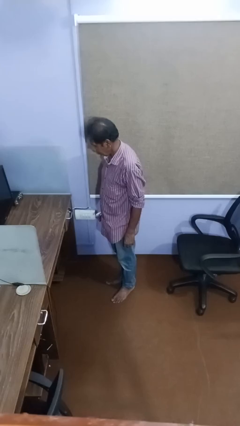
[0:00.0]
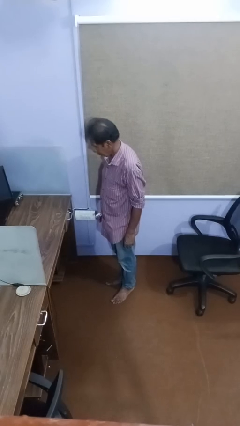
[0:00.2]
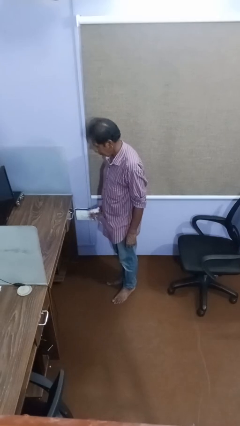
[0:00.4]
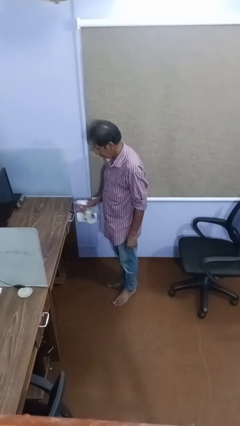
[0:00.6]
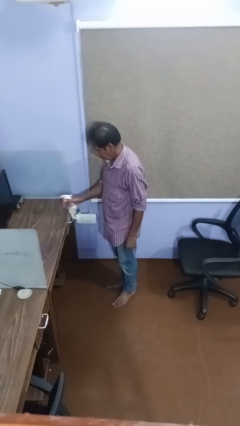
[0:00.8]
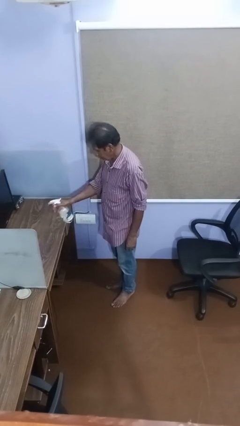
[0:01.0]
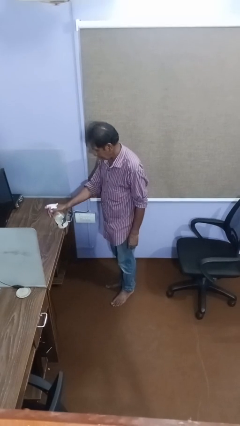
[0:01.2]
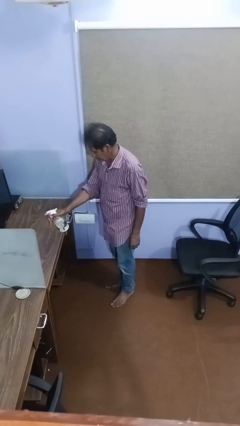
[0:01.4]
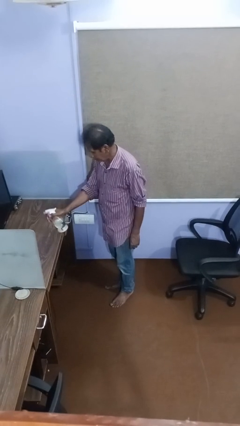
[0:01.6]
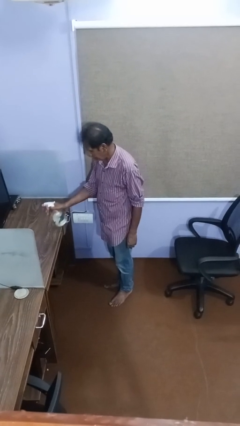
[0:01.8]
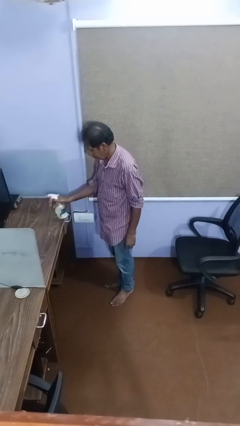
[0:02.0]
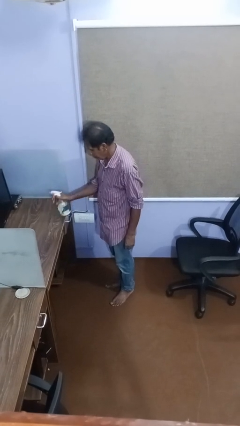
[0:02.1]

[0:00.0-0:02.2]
person sprays from bottle

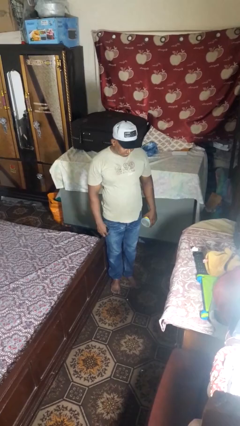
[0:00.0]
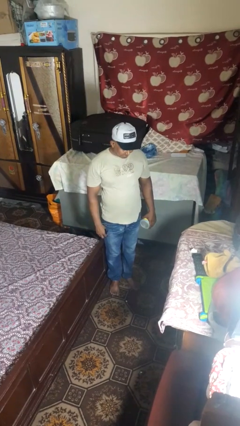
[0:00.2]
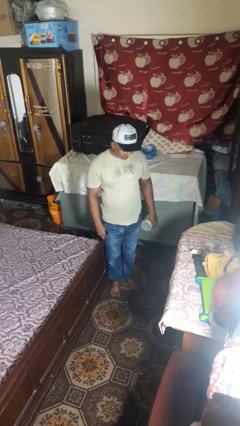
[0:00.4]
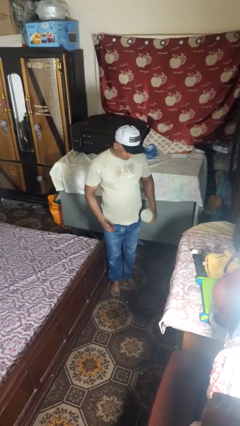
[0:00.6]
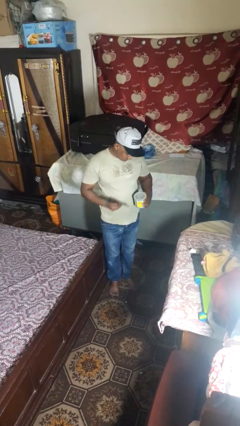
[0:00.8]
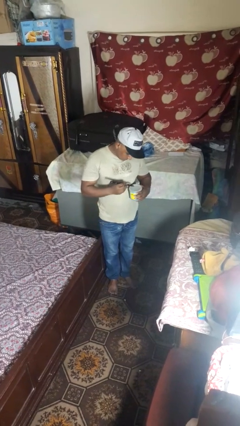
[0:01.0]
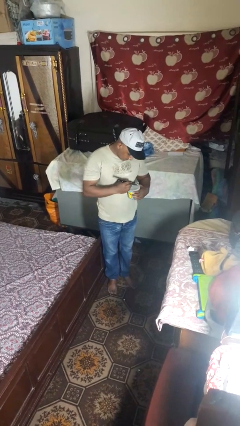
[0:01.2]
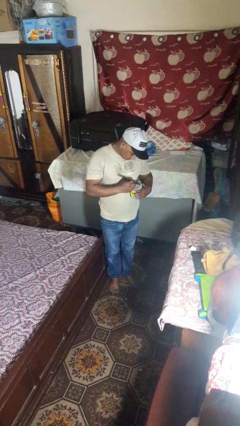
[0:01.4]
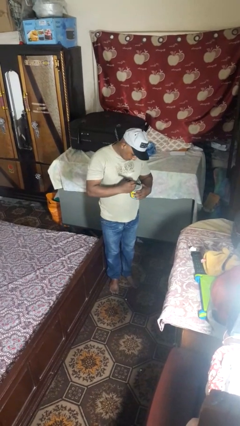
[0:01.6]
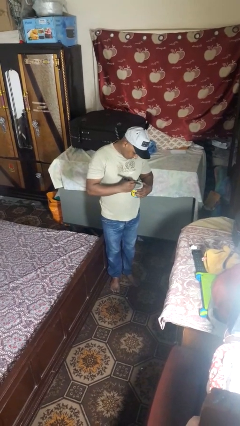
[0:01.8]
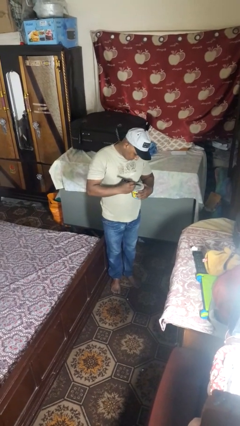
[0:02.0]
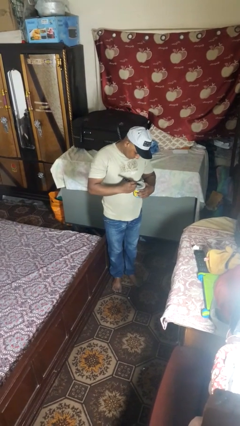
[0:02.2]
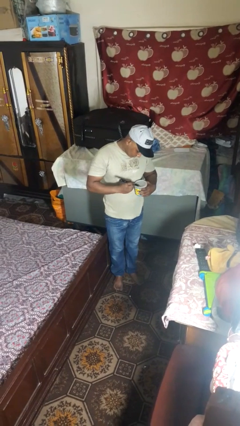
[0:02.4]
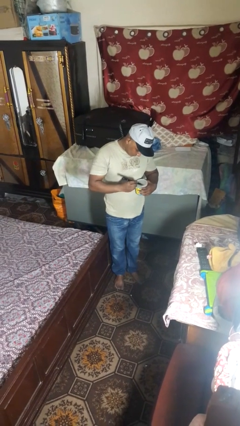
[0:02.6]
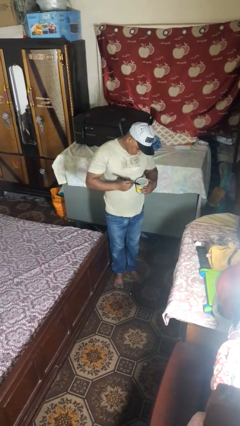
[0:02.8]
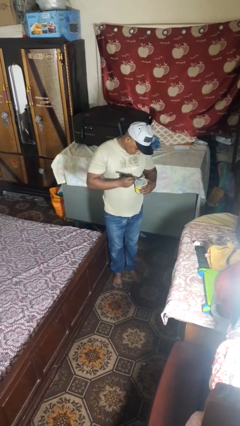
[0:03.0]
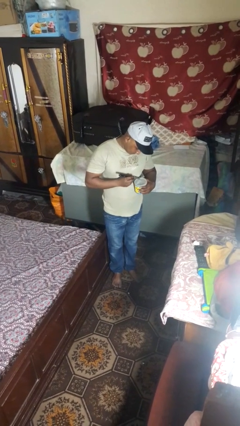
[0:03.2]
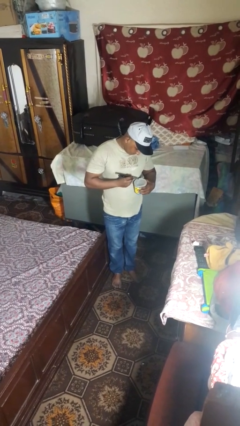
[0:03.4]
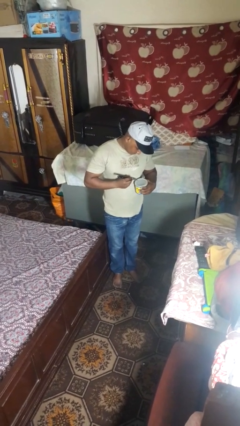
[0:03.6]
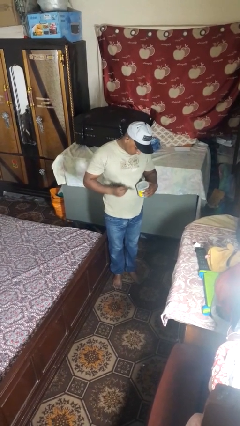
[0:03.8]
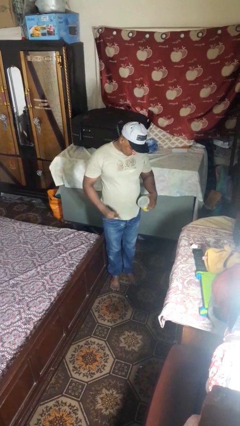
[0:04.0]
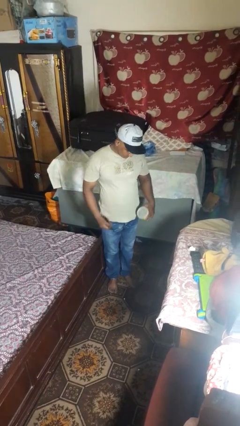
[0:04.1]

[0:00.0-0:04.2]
person opens can with can opener

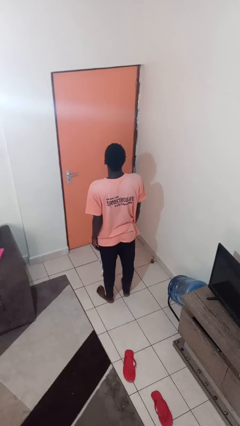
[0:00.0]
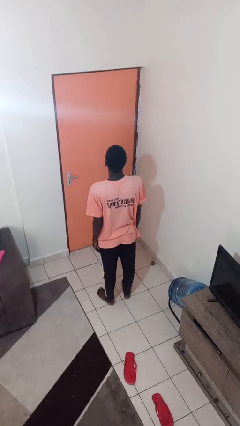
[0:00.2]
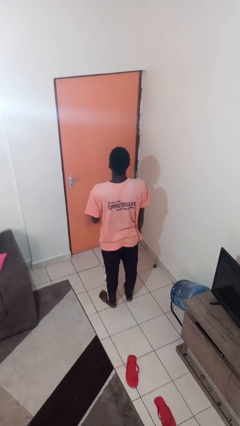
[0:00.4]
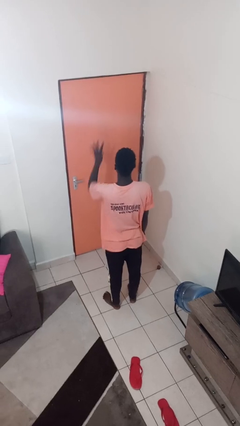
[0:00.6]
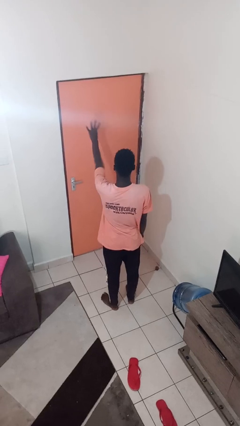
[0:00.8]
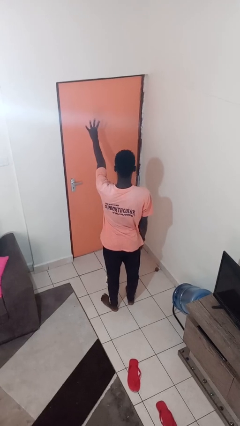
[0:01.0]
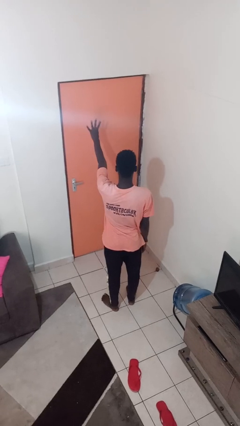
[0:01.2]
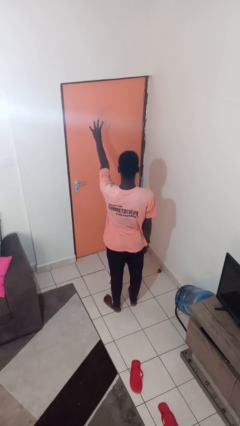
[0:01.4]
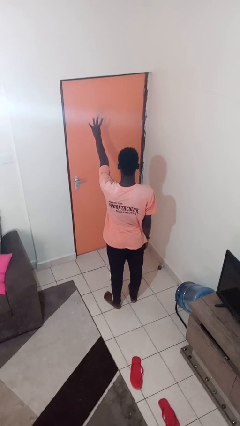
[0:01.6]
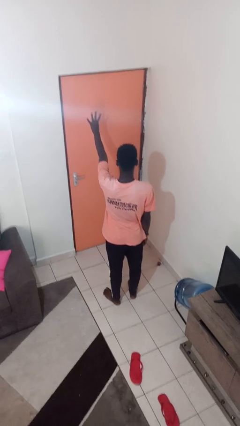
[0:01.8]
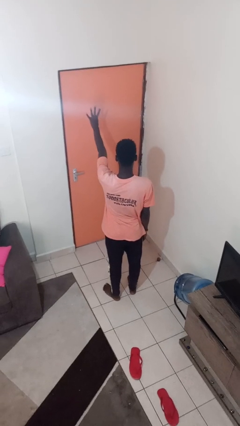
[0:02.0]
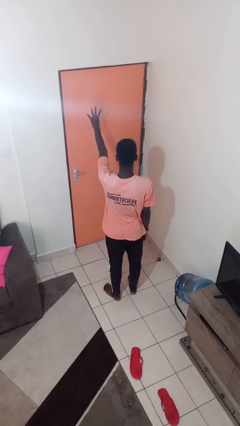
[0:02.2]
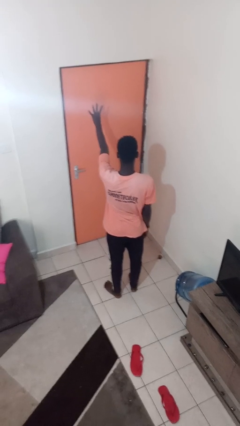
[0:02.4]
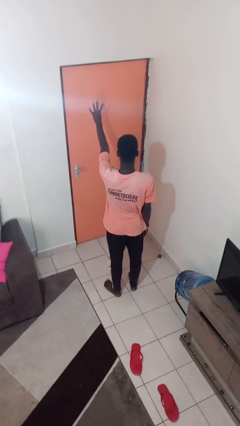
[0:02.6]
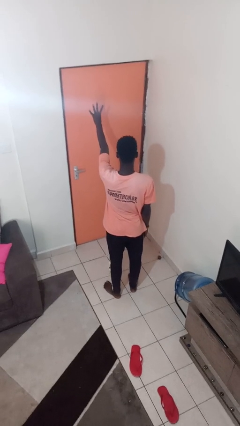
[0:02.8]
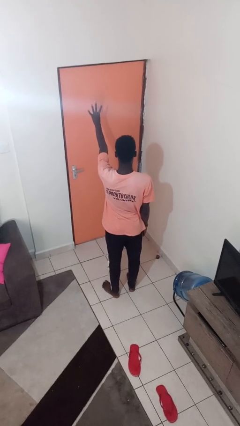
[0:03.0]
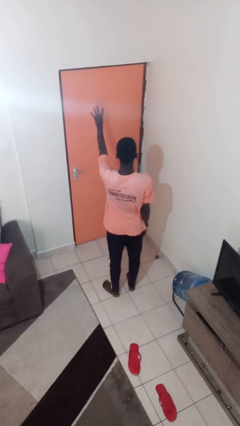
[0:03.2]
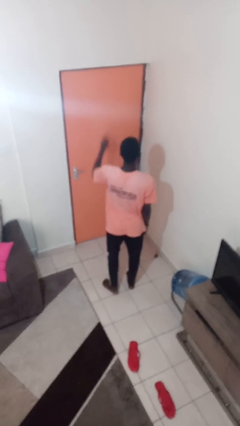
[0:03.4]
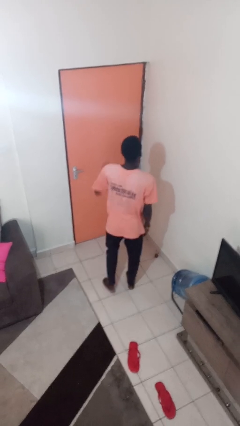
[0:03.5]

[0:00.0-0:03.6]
person gestures number four

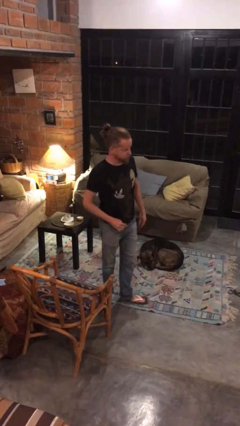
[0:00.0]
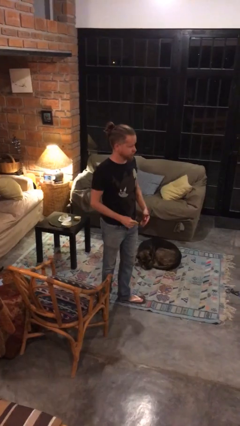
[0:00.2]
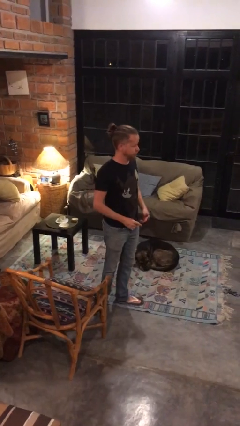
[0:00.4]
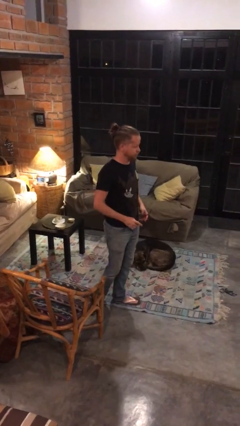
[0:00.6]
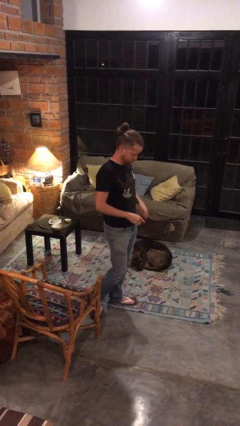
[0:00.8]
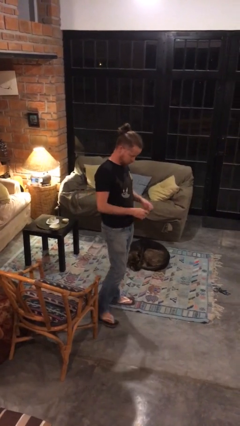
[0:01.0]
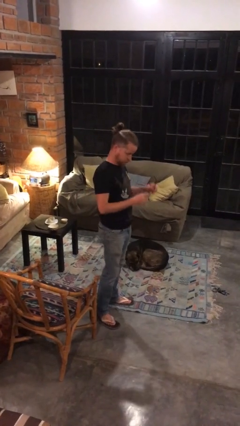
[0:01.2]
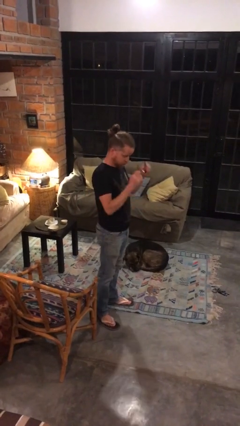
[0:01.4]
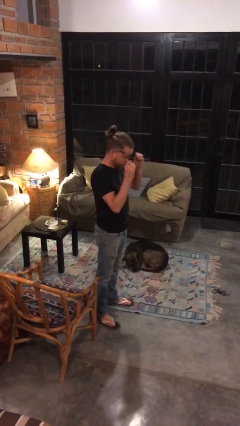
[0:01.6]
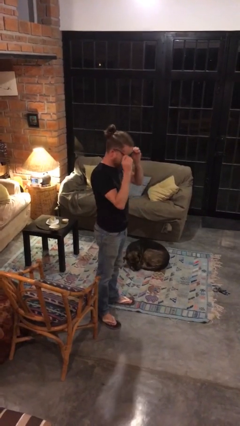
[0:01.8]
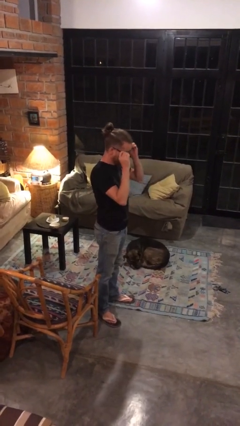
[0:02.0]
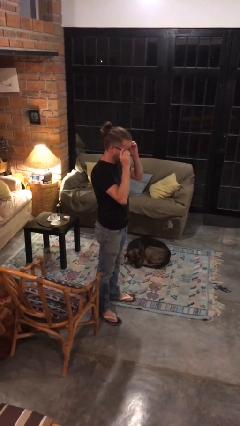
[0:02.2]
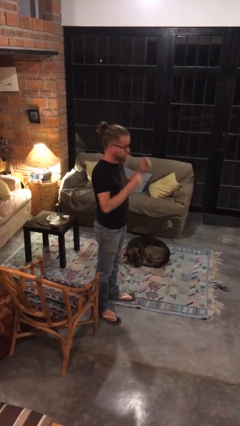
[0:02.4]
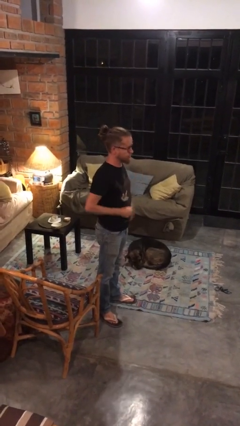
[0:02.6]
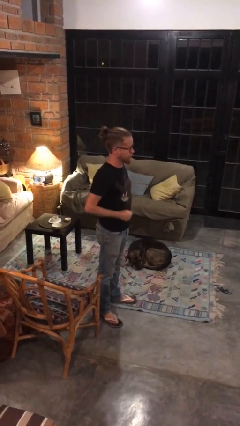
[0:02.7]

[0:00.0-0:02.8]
person puts on glasses

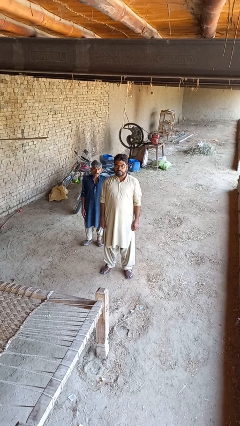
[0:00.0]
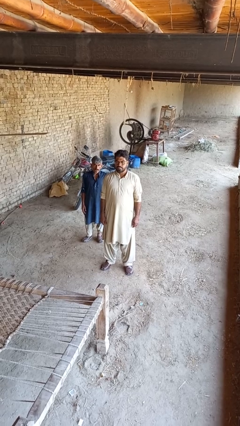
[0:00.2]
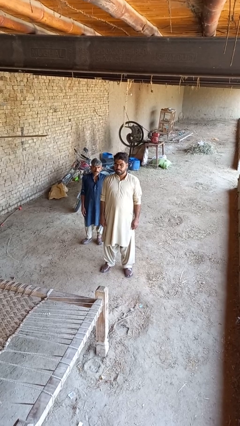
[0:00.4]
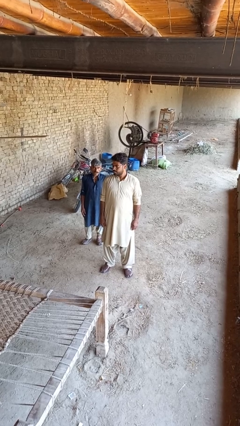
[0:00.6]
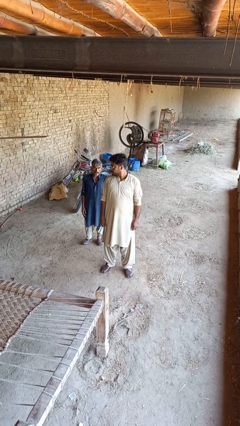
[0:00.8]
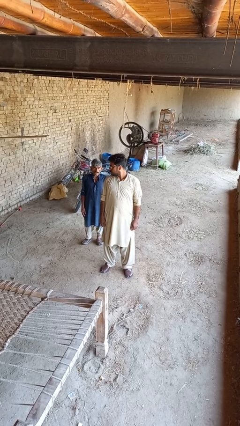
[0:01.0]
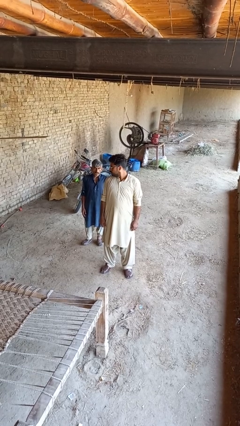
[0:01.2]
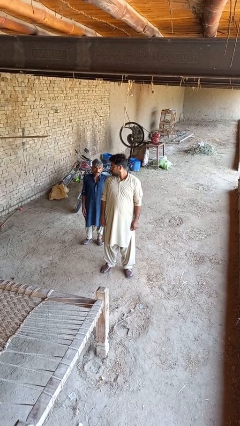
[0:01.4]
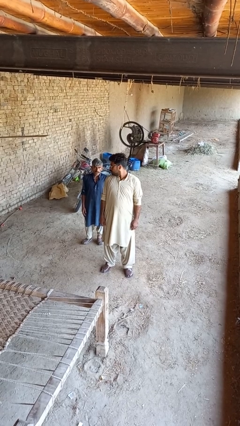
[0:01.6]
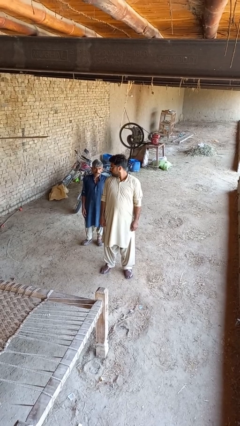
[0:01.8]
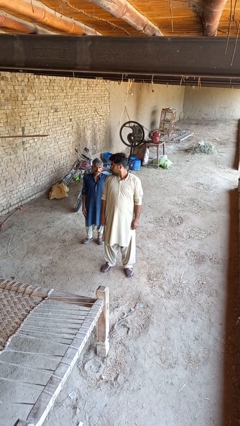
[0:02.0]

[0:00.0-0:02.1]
person looks over shoulder

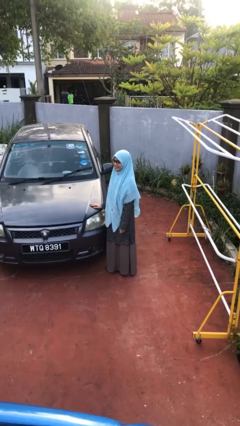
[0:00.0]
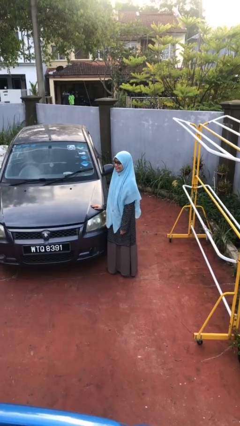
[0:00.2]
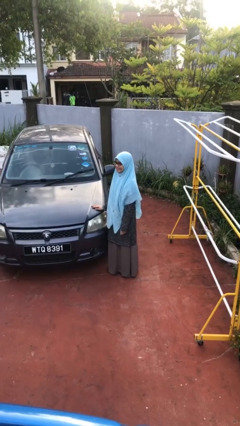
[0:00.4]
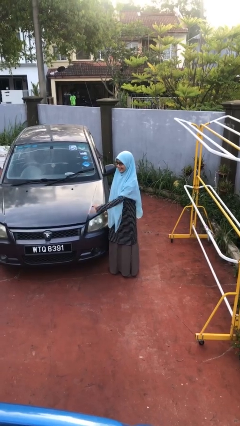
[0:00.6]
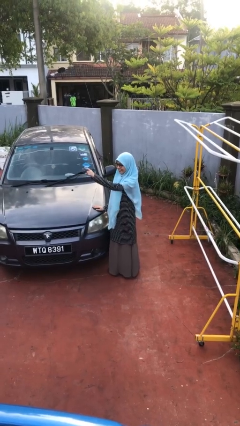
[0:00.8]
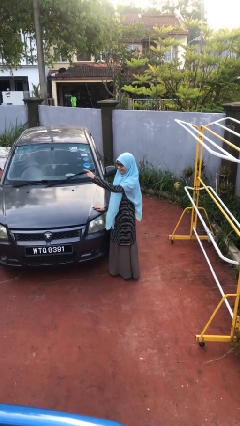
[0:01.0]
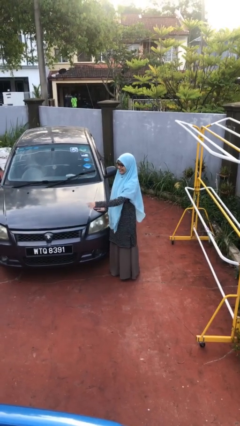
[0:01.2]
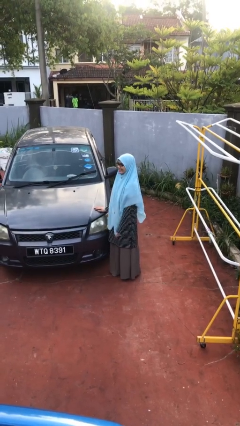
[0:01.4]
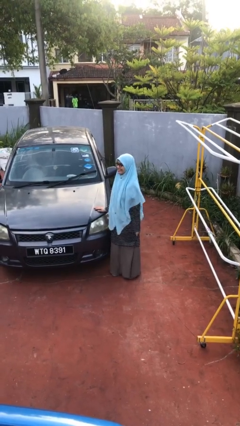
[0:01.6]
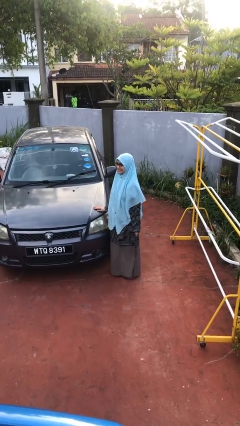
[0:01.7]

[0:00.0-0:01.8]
person points at person

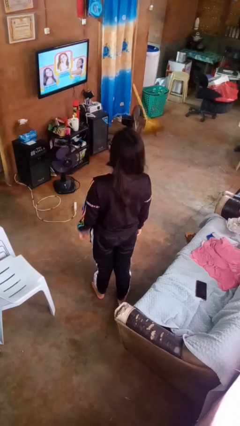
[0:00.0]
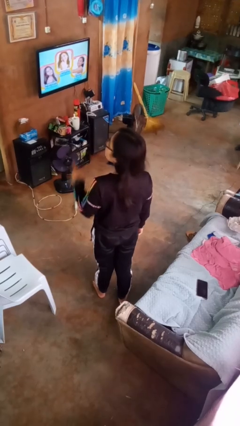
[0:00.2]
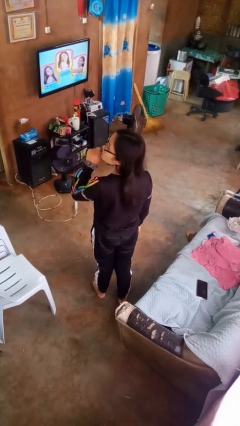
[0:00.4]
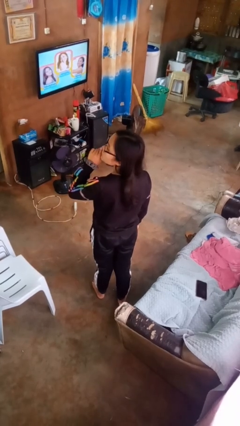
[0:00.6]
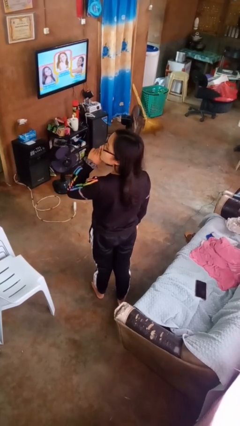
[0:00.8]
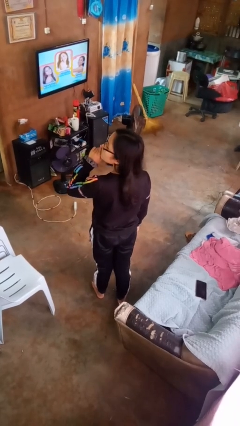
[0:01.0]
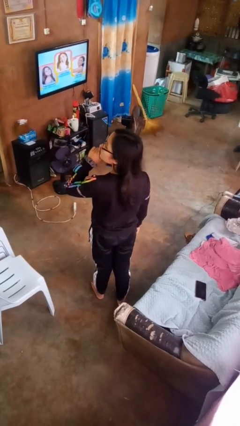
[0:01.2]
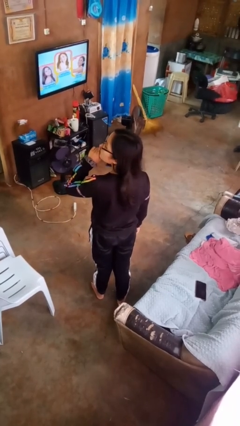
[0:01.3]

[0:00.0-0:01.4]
person gestures be quiet
